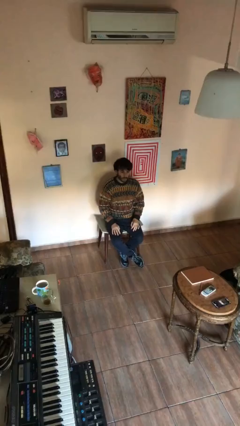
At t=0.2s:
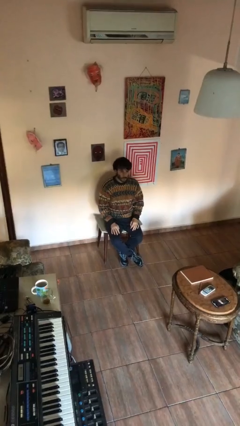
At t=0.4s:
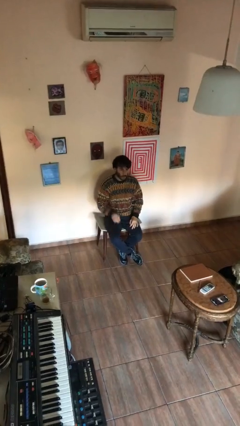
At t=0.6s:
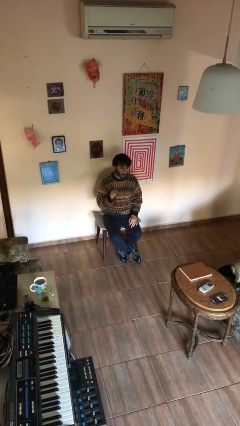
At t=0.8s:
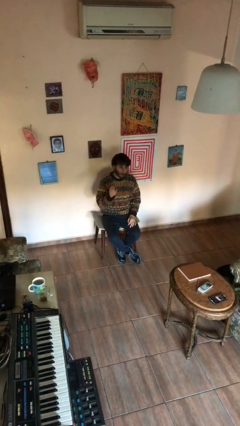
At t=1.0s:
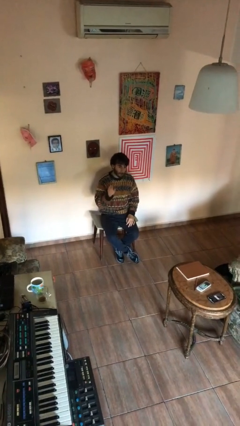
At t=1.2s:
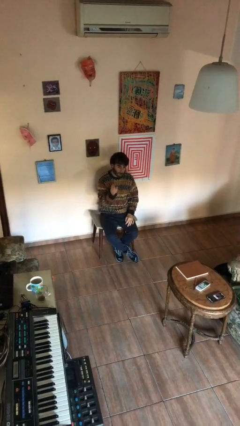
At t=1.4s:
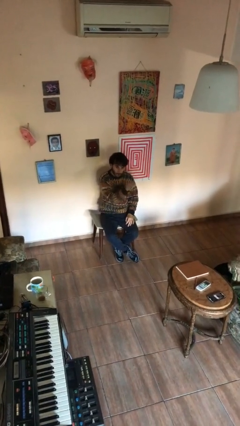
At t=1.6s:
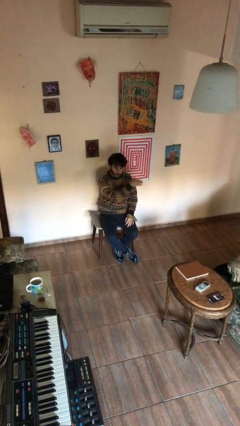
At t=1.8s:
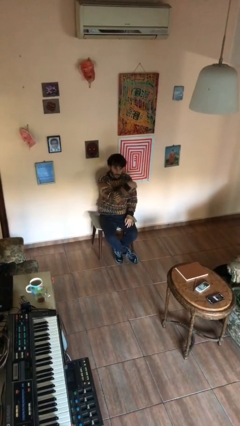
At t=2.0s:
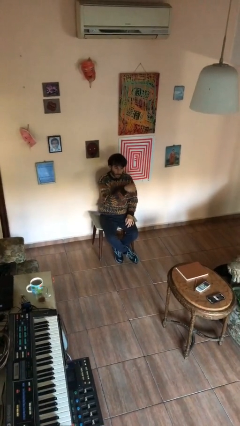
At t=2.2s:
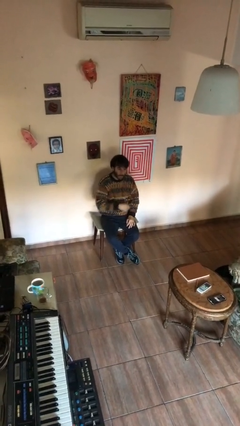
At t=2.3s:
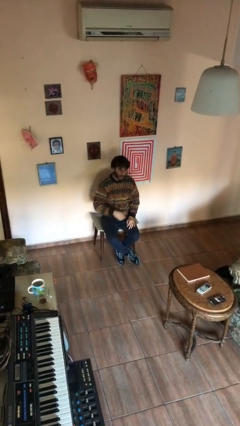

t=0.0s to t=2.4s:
person gestures swipe left

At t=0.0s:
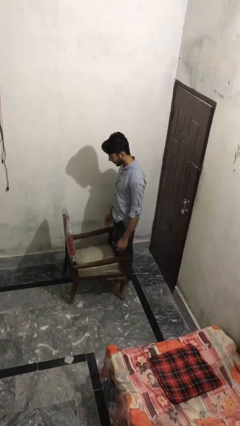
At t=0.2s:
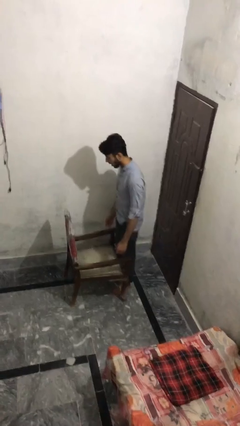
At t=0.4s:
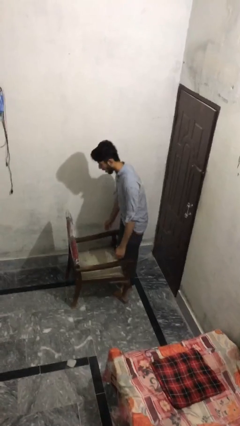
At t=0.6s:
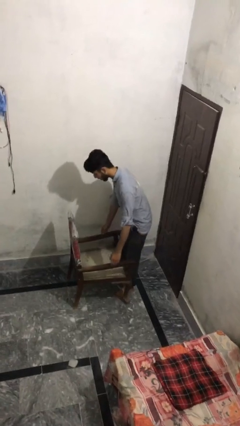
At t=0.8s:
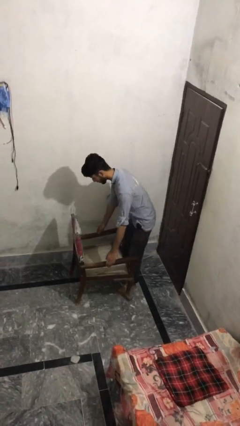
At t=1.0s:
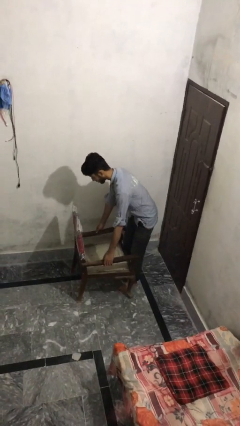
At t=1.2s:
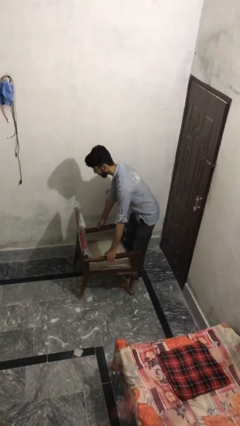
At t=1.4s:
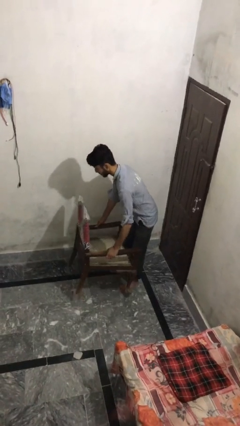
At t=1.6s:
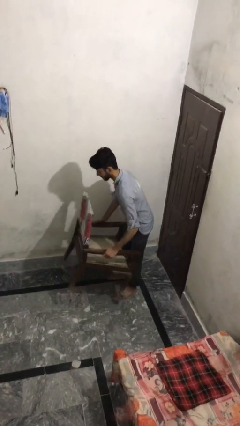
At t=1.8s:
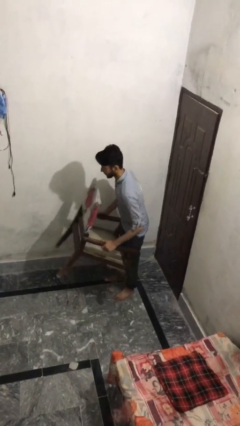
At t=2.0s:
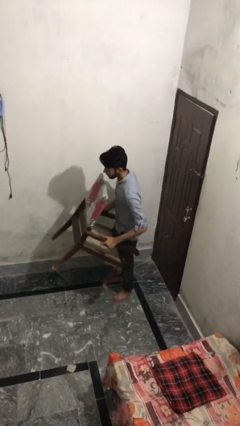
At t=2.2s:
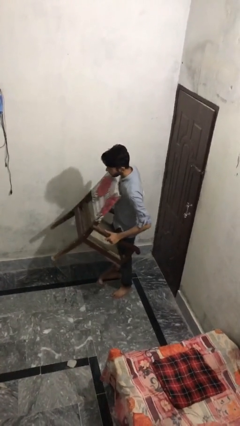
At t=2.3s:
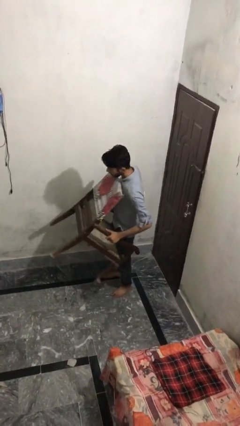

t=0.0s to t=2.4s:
person picks up object from floor

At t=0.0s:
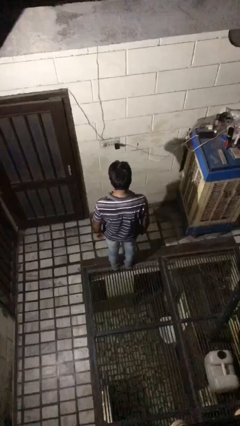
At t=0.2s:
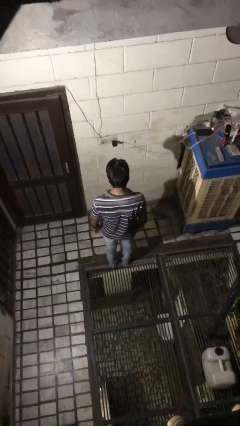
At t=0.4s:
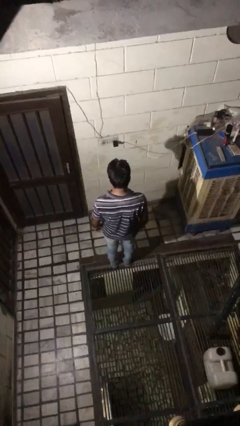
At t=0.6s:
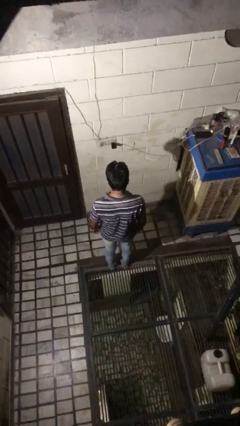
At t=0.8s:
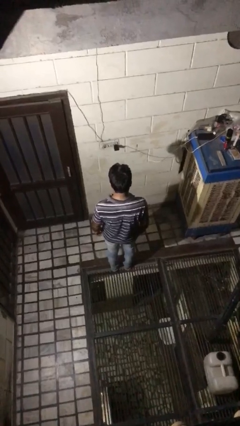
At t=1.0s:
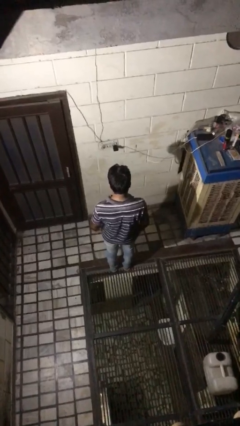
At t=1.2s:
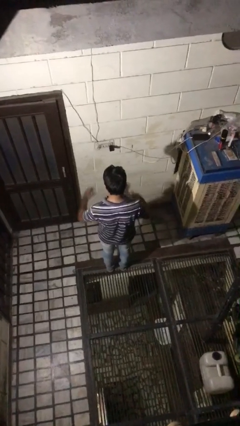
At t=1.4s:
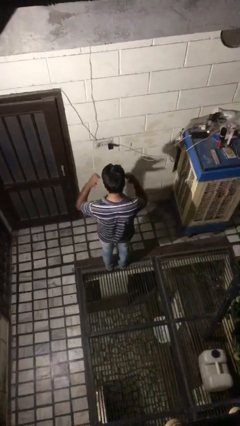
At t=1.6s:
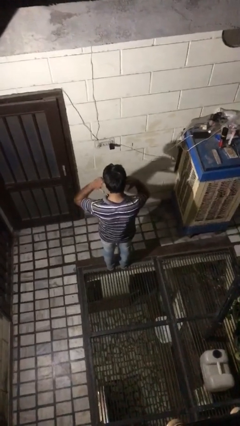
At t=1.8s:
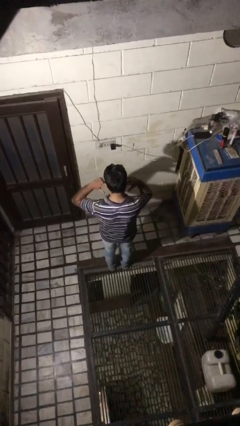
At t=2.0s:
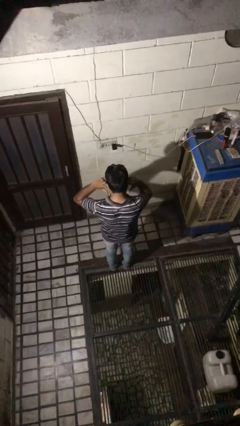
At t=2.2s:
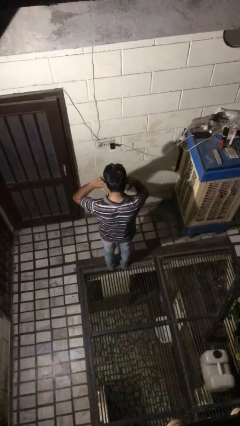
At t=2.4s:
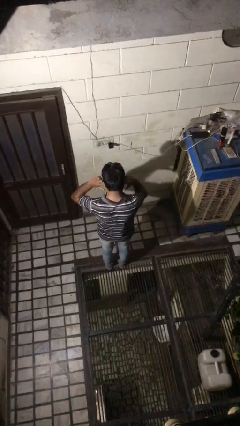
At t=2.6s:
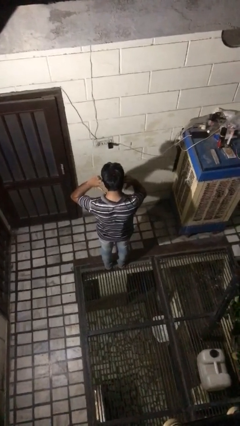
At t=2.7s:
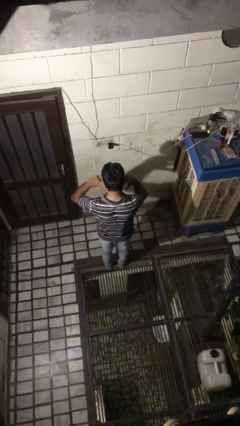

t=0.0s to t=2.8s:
person puts fingers in ear

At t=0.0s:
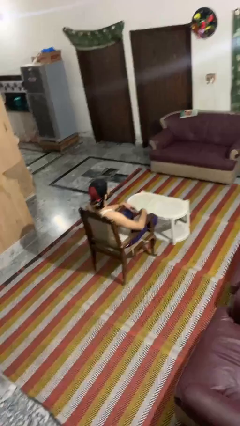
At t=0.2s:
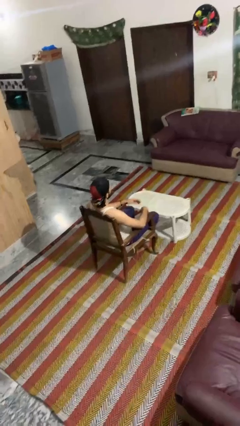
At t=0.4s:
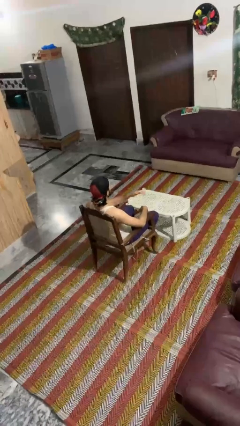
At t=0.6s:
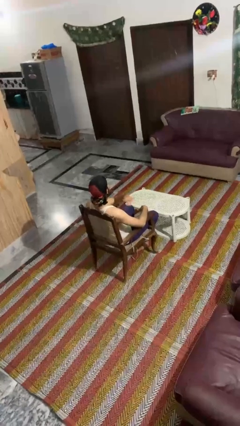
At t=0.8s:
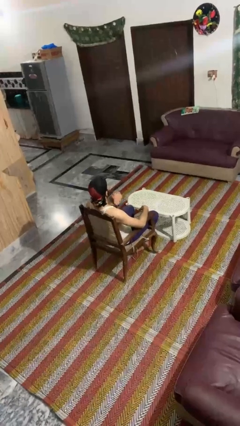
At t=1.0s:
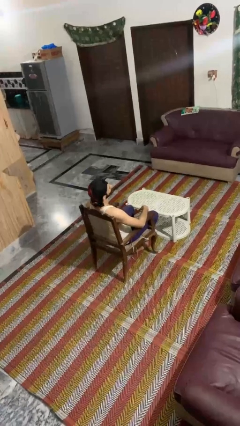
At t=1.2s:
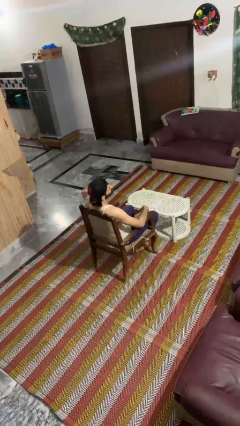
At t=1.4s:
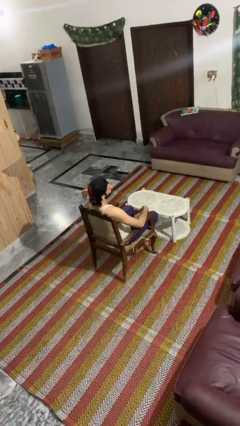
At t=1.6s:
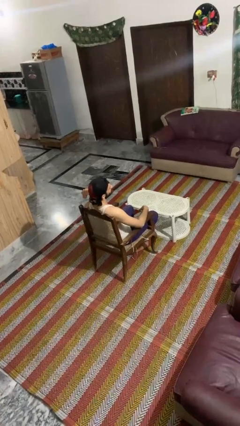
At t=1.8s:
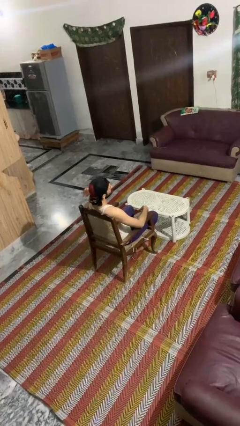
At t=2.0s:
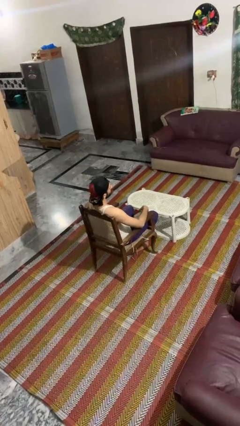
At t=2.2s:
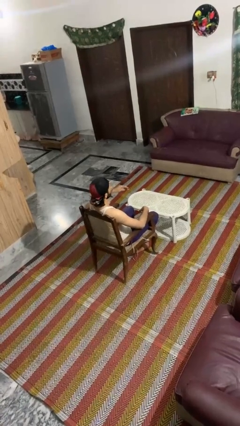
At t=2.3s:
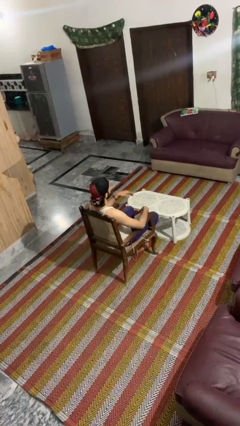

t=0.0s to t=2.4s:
person gestures cut

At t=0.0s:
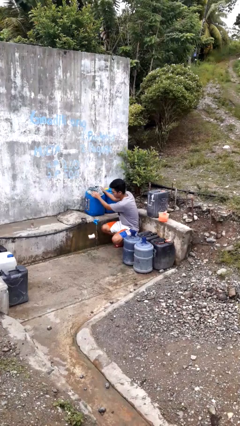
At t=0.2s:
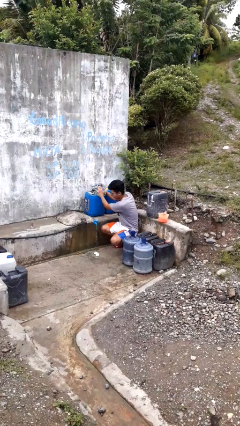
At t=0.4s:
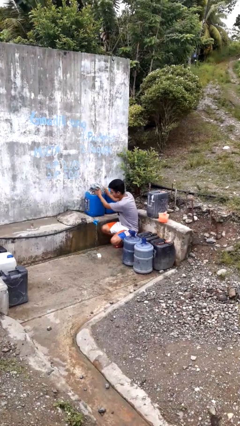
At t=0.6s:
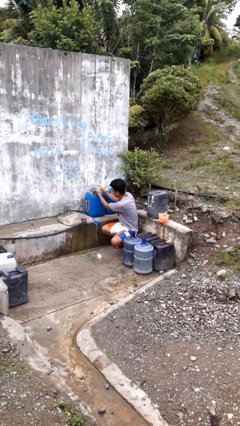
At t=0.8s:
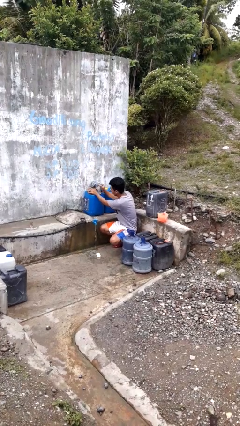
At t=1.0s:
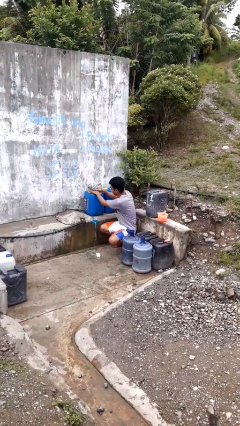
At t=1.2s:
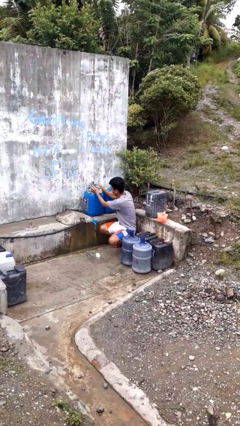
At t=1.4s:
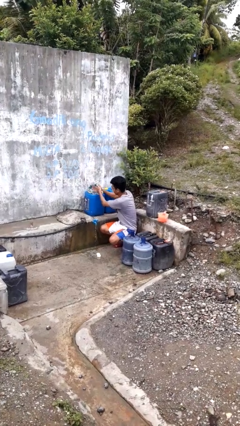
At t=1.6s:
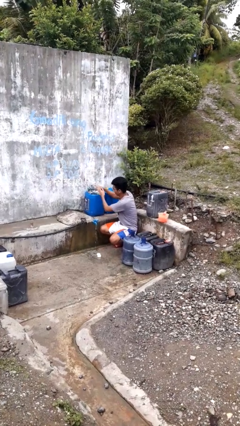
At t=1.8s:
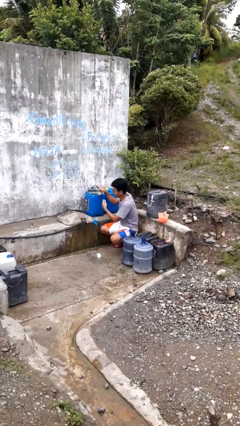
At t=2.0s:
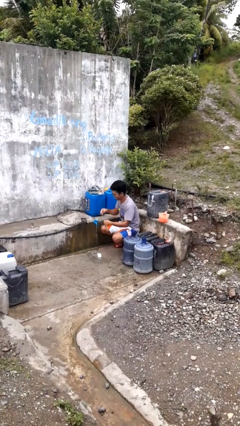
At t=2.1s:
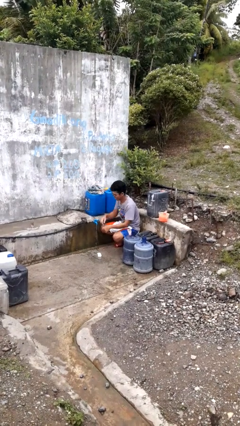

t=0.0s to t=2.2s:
person dries hands with towel

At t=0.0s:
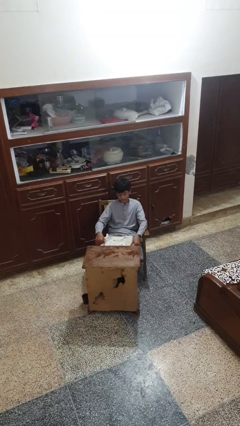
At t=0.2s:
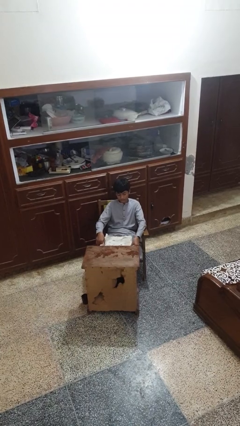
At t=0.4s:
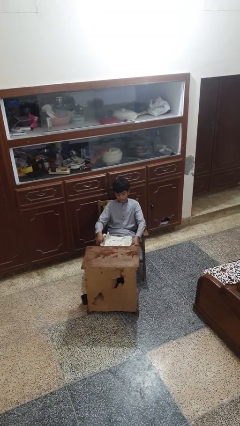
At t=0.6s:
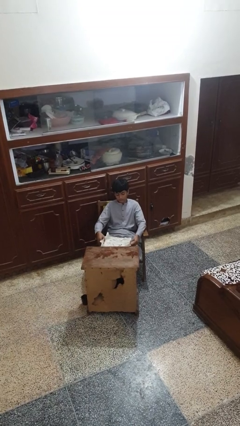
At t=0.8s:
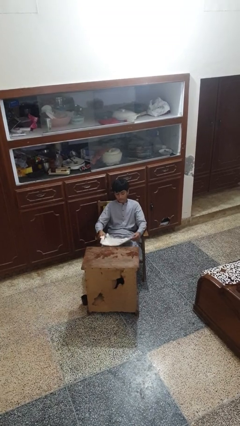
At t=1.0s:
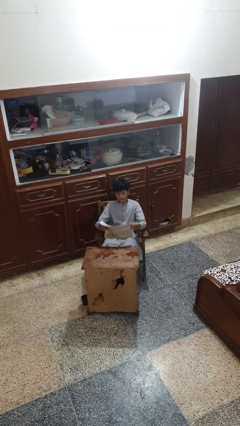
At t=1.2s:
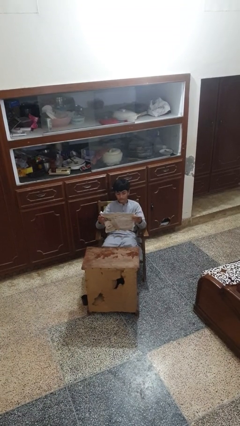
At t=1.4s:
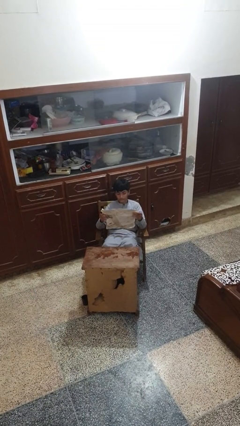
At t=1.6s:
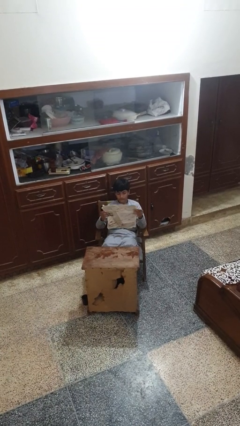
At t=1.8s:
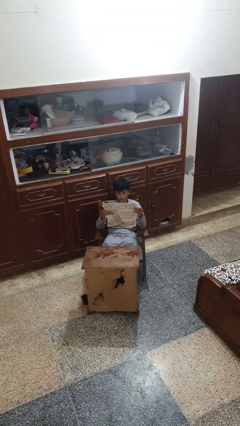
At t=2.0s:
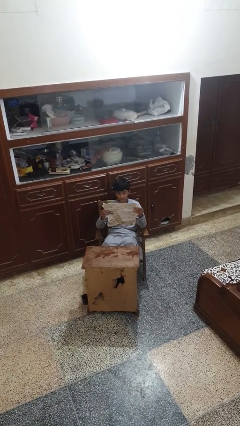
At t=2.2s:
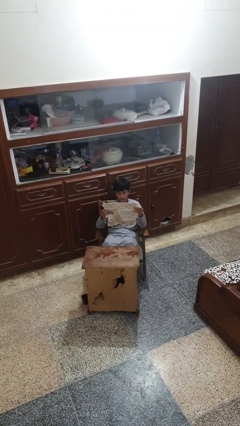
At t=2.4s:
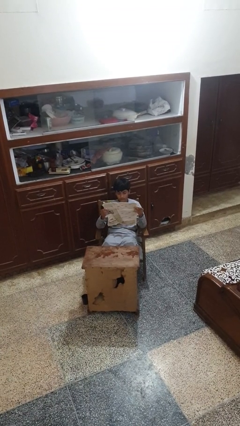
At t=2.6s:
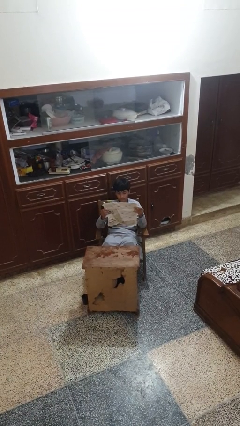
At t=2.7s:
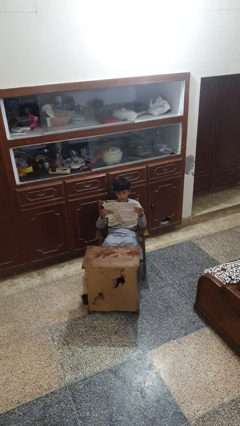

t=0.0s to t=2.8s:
person reads newspaper

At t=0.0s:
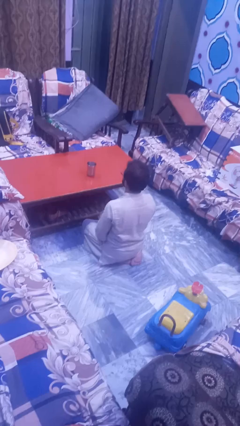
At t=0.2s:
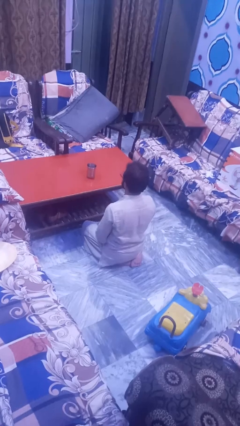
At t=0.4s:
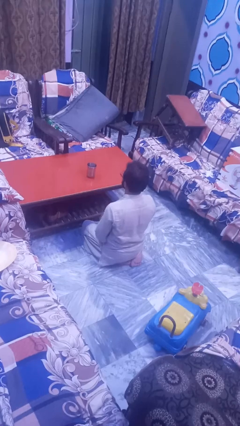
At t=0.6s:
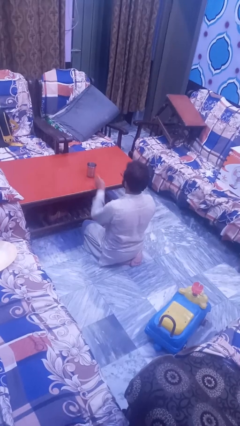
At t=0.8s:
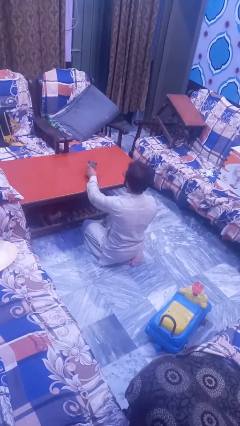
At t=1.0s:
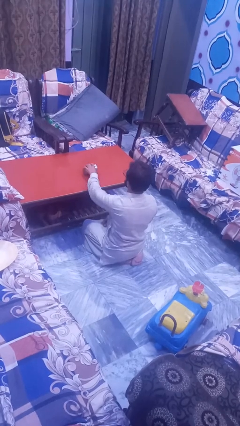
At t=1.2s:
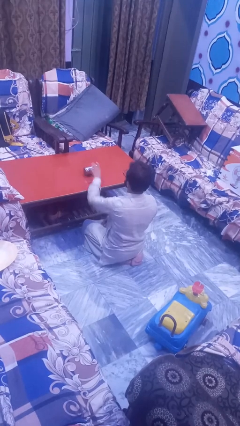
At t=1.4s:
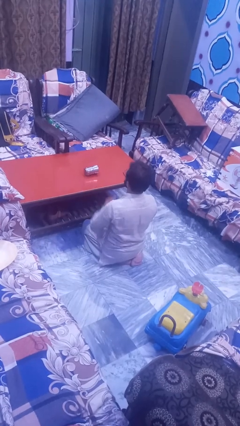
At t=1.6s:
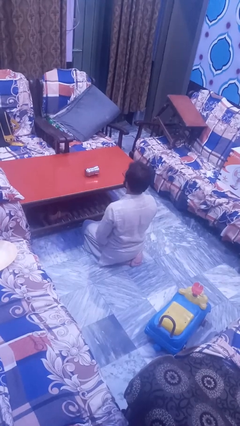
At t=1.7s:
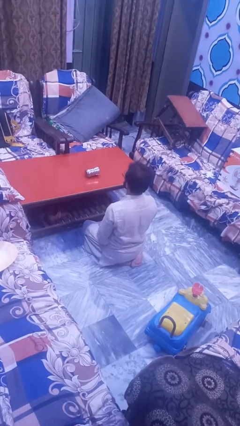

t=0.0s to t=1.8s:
person knocks over glass

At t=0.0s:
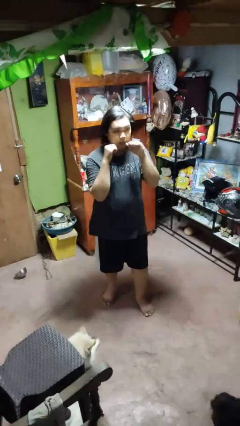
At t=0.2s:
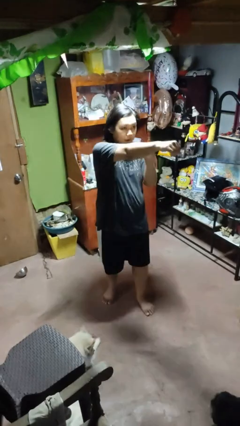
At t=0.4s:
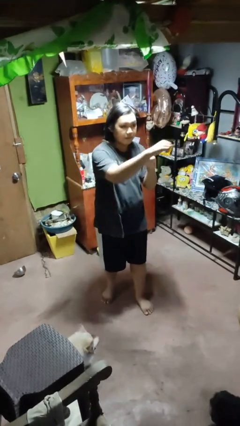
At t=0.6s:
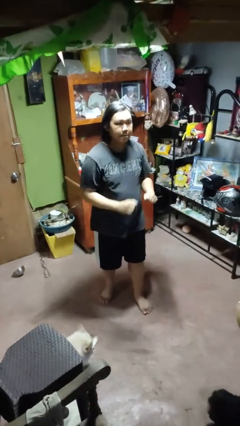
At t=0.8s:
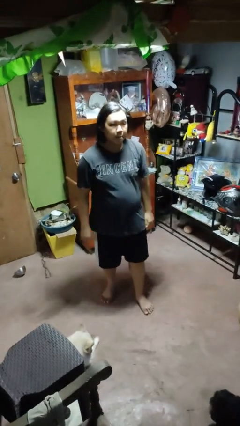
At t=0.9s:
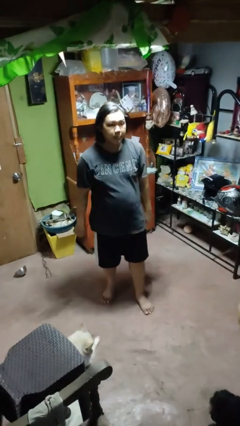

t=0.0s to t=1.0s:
person punches
